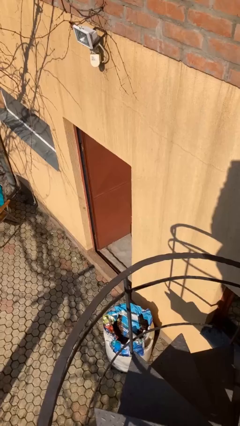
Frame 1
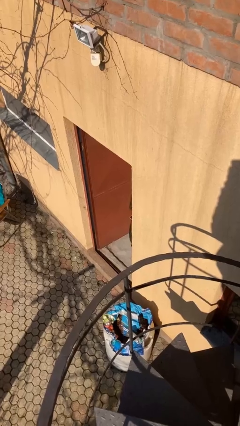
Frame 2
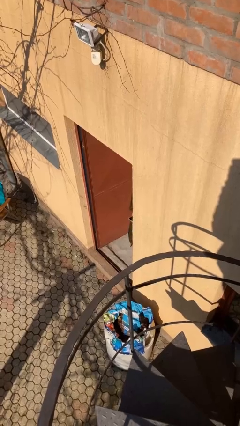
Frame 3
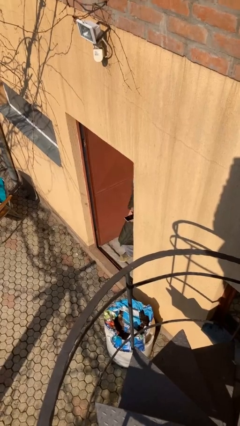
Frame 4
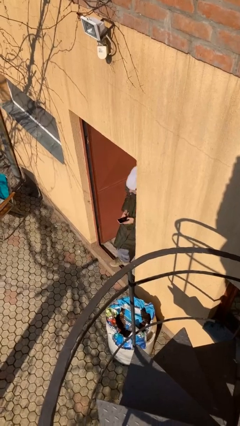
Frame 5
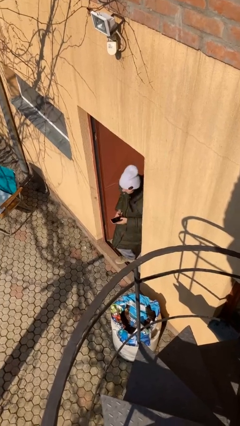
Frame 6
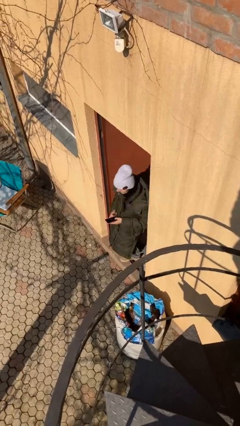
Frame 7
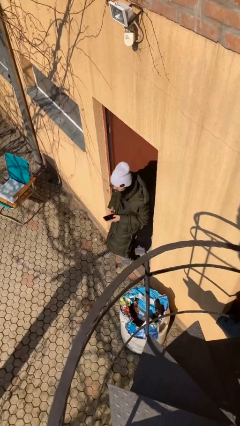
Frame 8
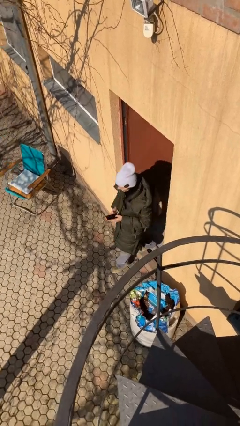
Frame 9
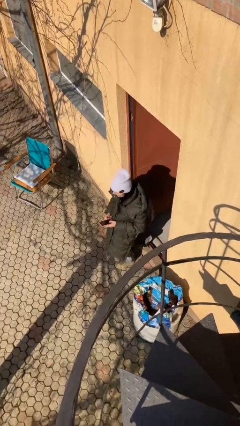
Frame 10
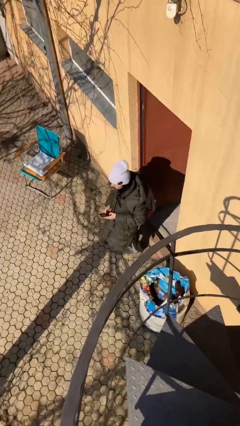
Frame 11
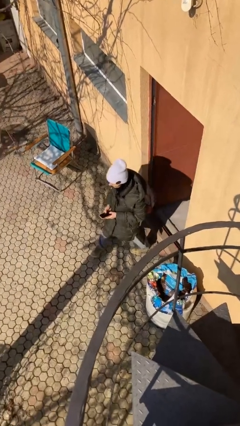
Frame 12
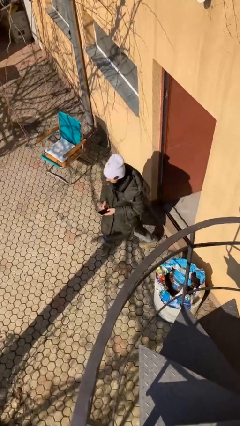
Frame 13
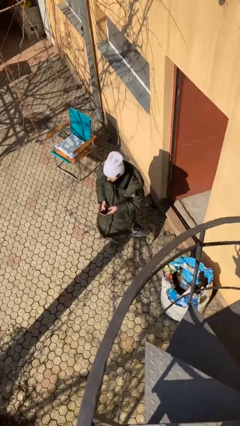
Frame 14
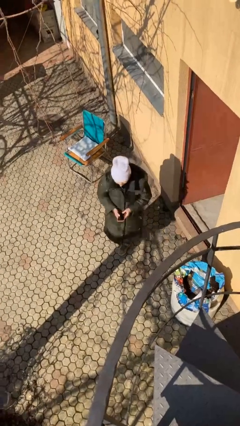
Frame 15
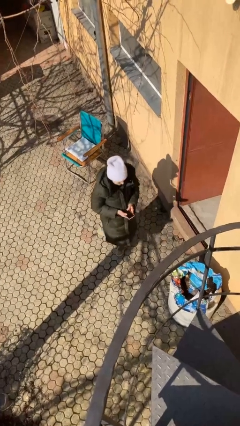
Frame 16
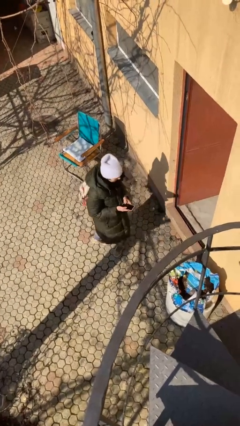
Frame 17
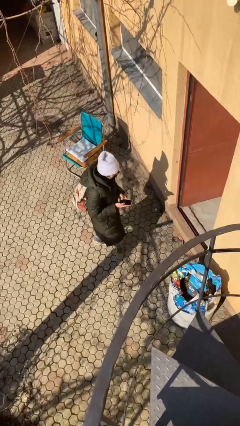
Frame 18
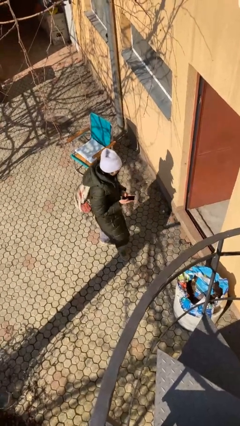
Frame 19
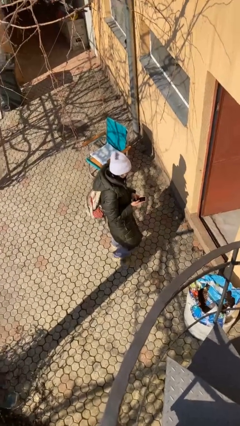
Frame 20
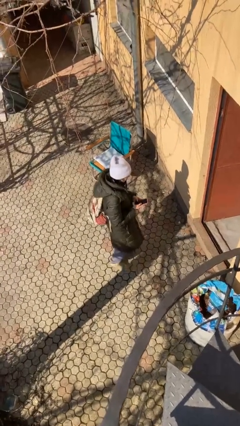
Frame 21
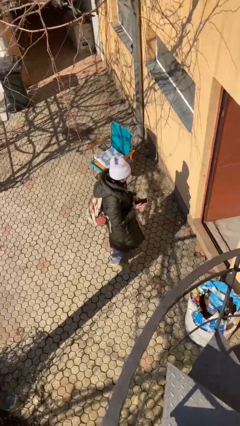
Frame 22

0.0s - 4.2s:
person enters scene through structure

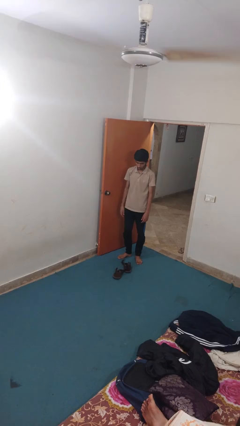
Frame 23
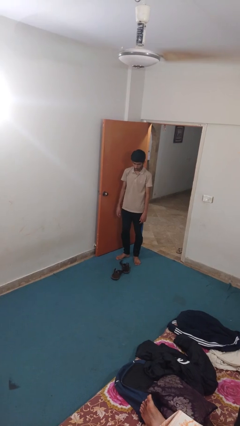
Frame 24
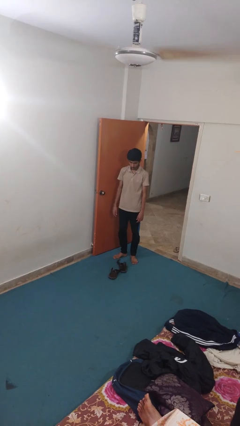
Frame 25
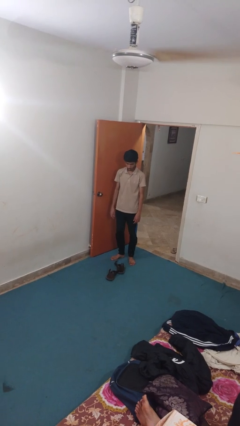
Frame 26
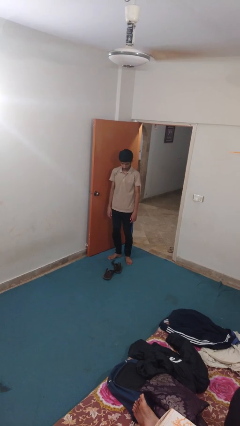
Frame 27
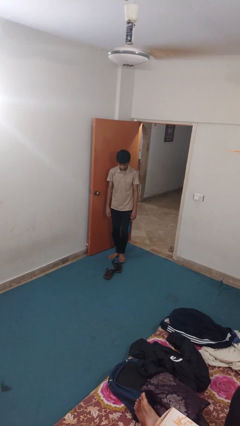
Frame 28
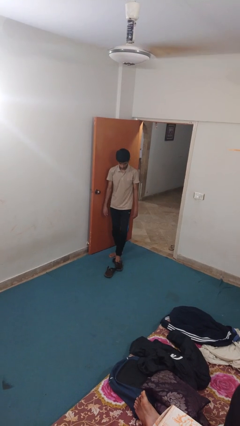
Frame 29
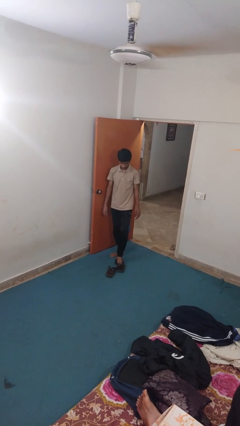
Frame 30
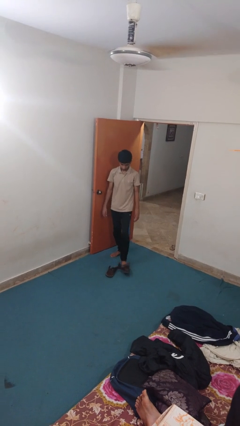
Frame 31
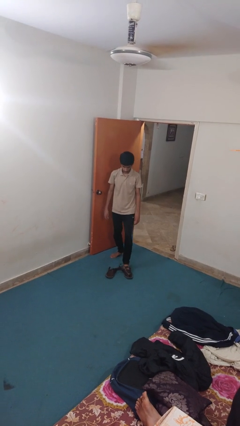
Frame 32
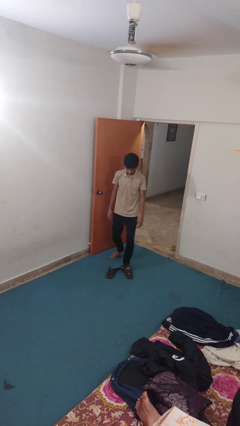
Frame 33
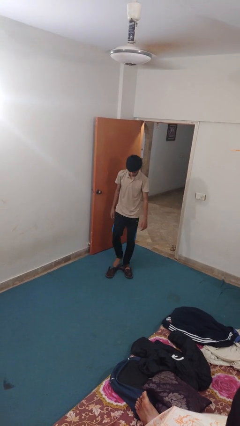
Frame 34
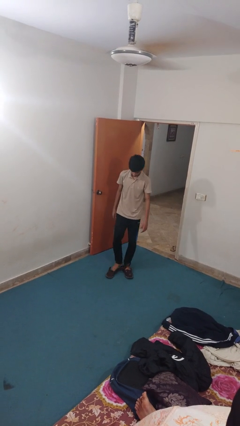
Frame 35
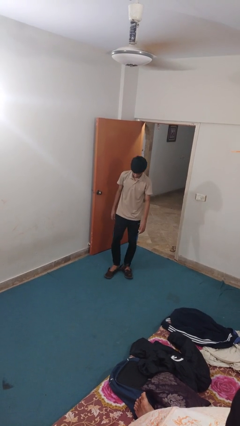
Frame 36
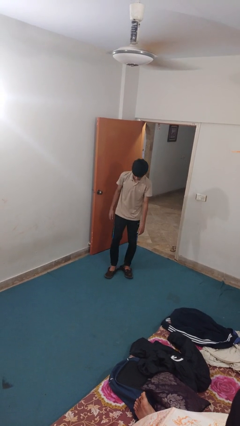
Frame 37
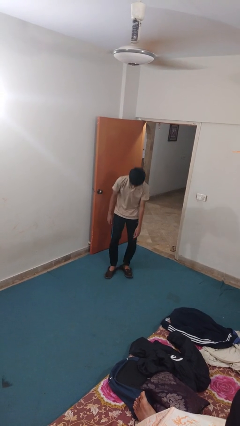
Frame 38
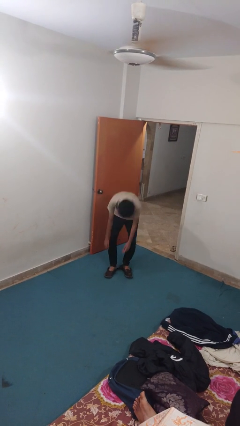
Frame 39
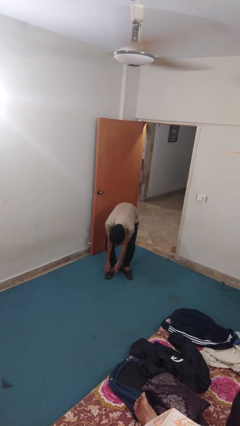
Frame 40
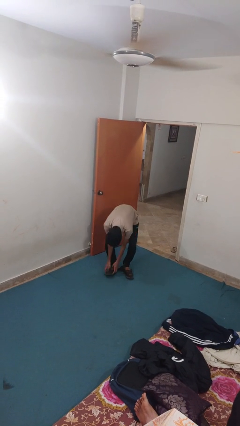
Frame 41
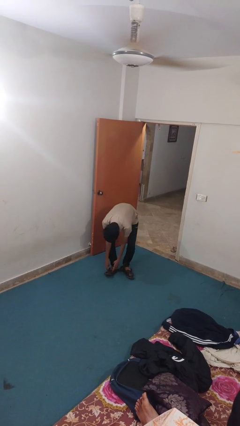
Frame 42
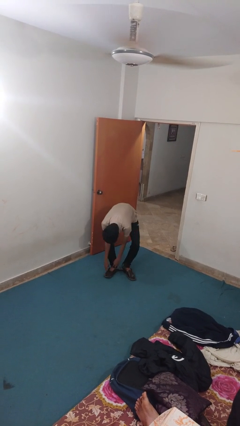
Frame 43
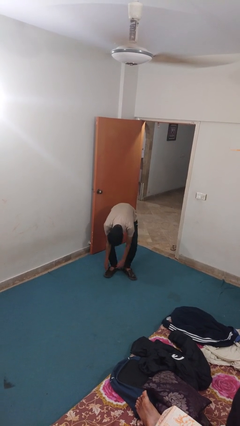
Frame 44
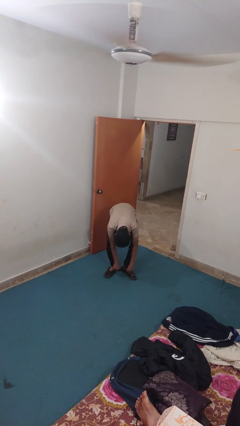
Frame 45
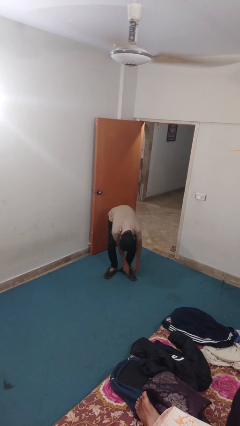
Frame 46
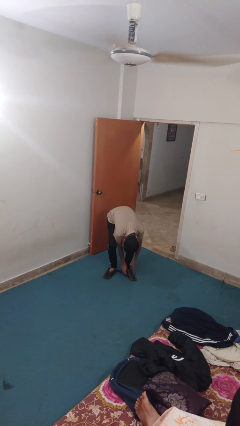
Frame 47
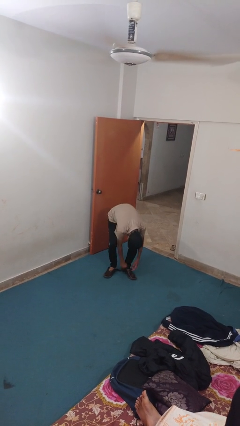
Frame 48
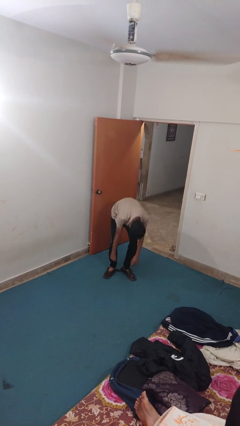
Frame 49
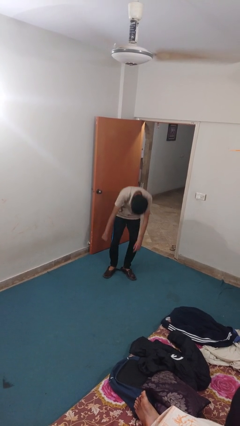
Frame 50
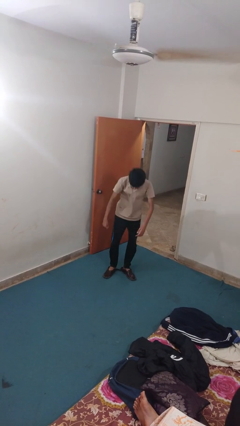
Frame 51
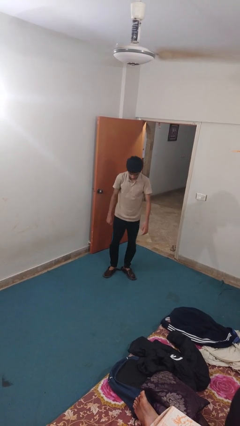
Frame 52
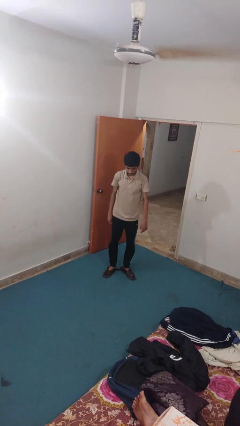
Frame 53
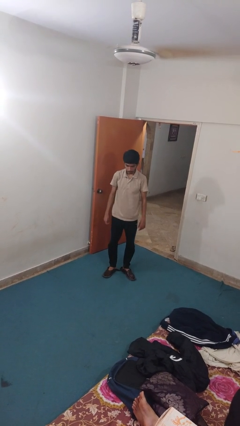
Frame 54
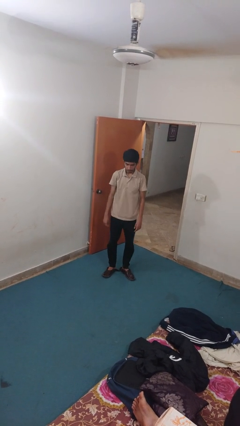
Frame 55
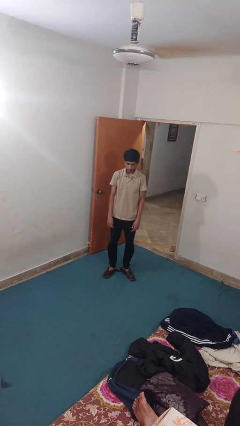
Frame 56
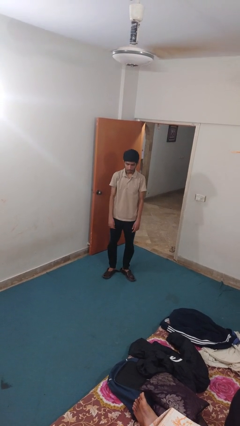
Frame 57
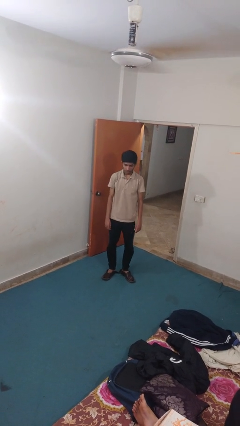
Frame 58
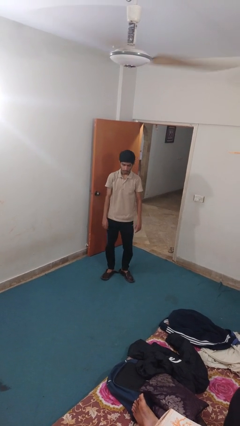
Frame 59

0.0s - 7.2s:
person puts on shoes

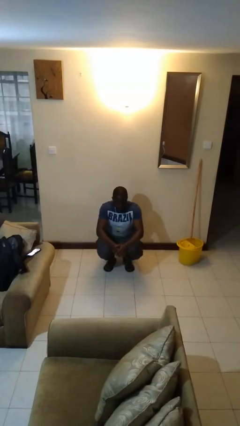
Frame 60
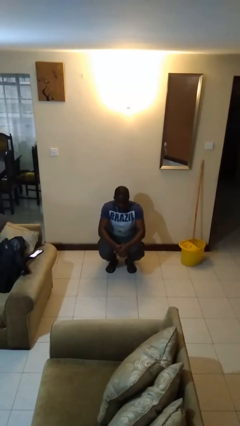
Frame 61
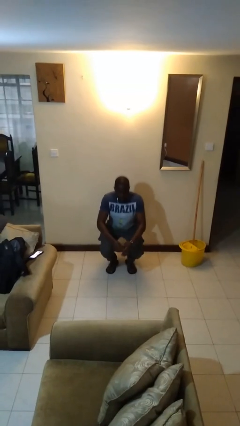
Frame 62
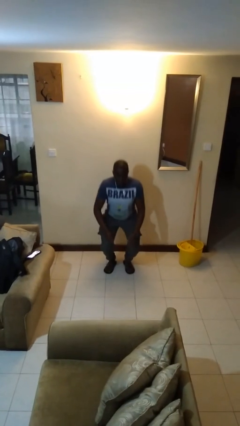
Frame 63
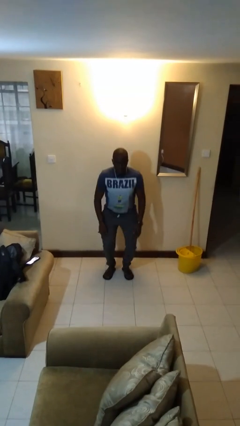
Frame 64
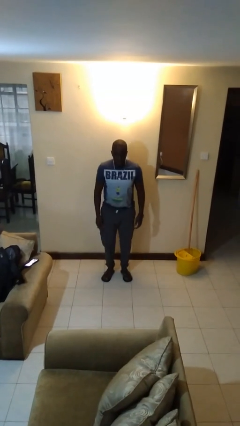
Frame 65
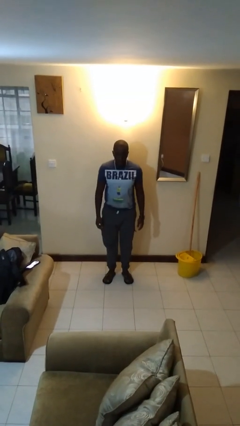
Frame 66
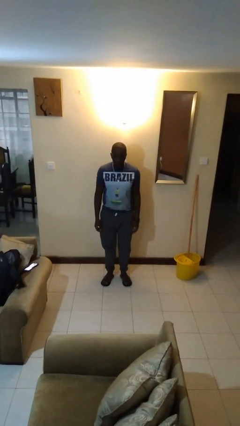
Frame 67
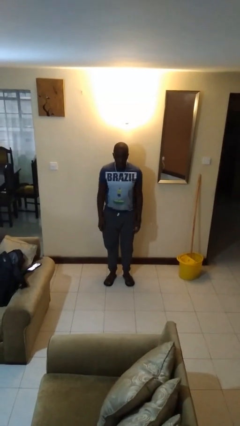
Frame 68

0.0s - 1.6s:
person stands up

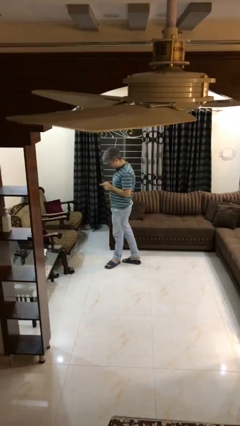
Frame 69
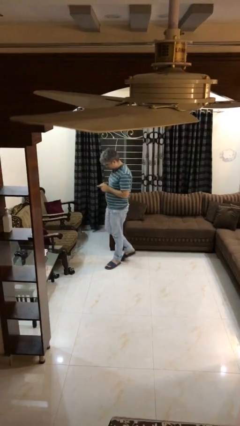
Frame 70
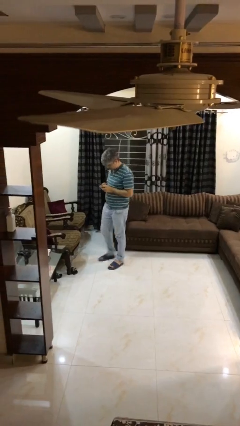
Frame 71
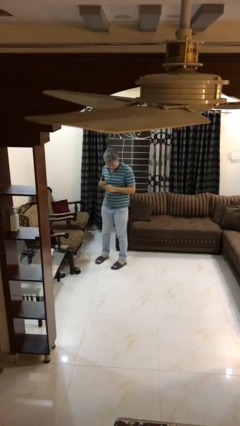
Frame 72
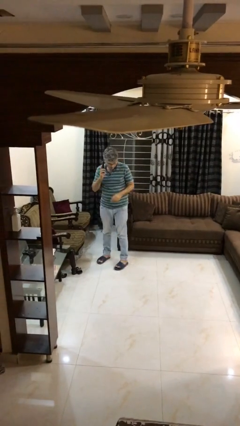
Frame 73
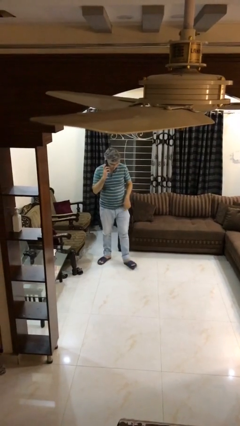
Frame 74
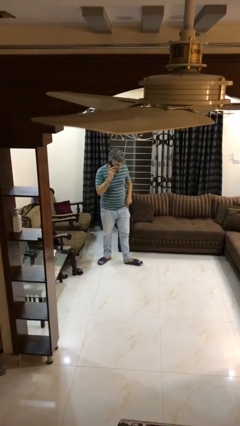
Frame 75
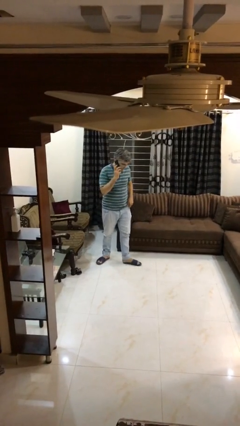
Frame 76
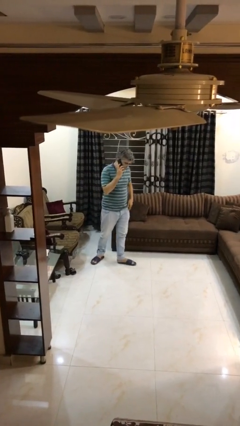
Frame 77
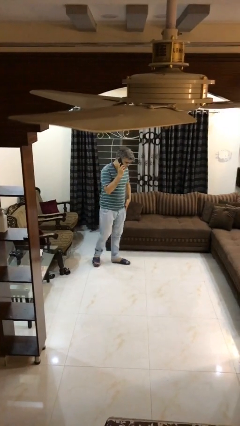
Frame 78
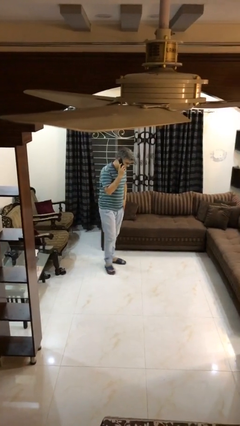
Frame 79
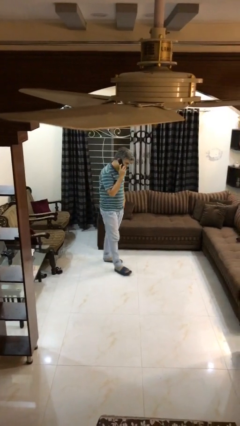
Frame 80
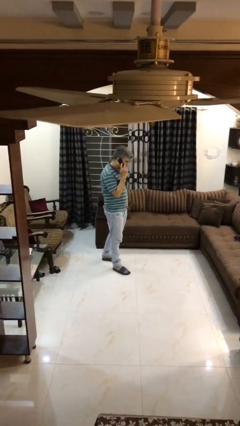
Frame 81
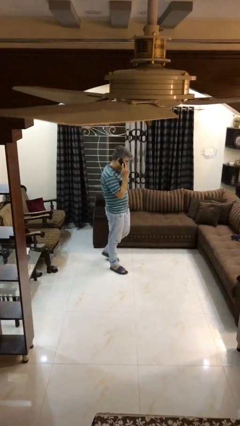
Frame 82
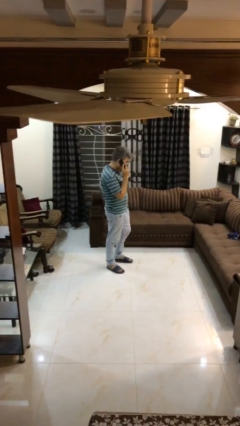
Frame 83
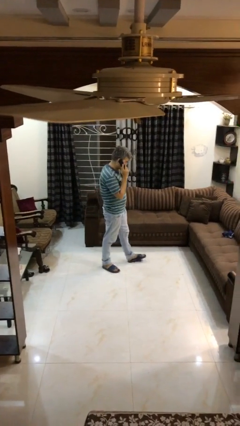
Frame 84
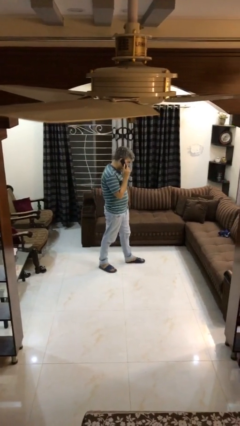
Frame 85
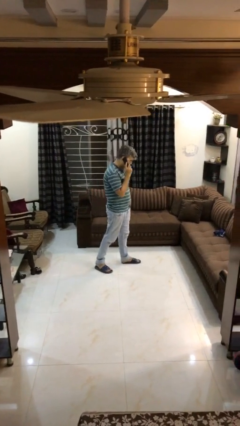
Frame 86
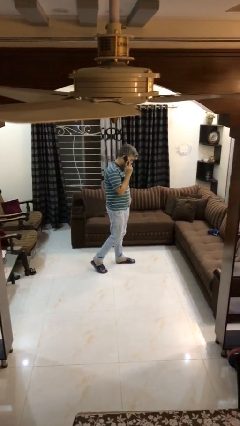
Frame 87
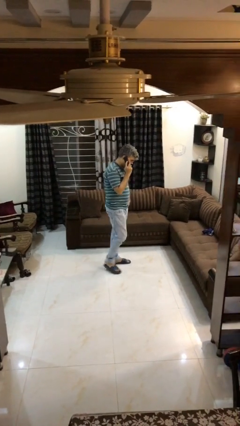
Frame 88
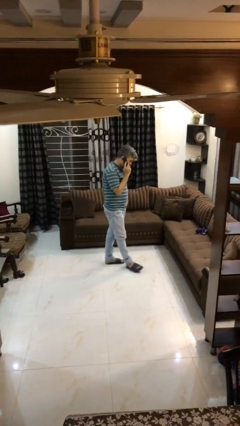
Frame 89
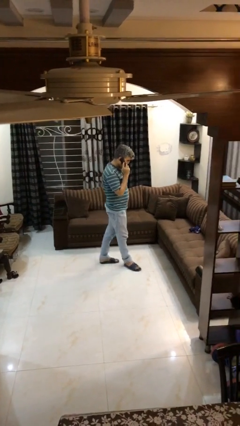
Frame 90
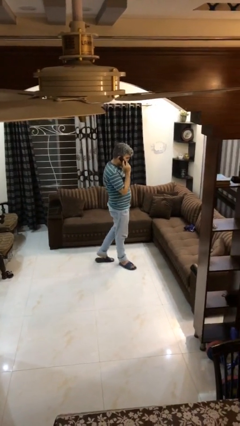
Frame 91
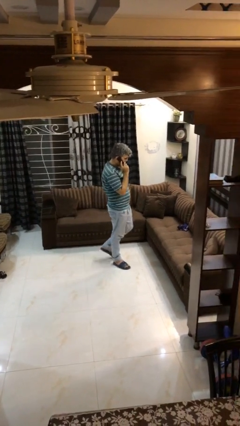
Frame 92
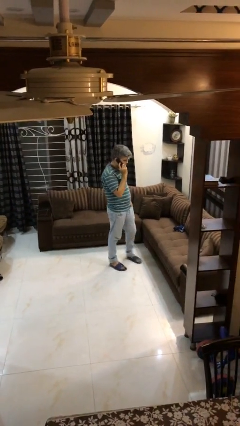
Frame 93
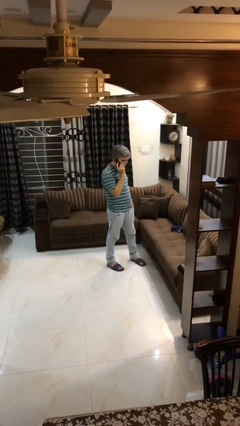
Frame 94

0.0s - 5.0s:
person talks on phone
